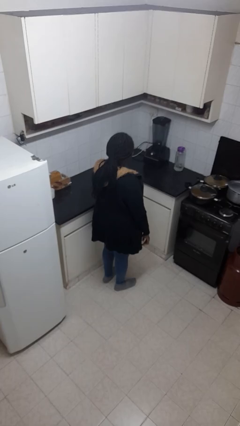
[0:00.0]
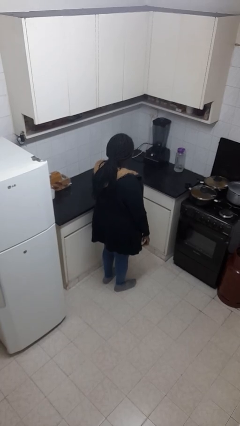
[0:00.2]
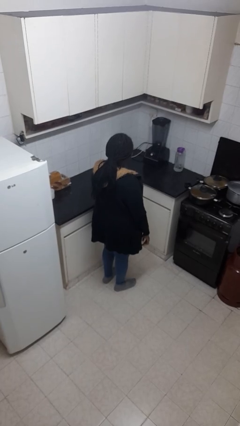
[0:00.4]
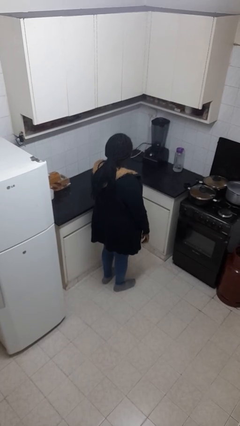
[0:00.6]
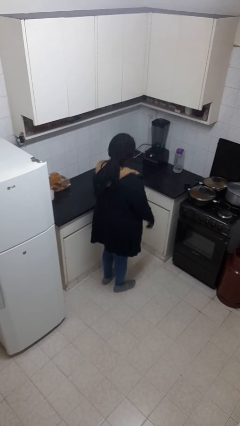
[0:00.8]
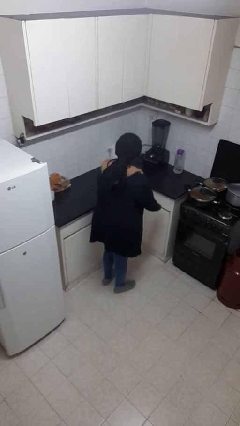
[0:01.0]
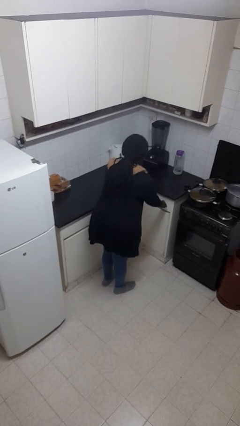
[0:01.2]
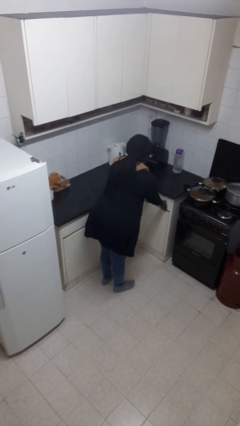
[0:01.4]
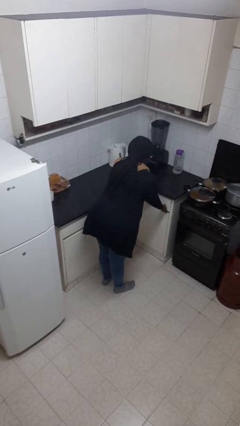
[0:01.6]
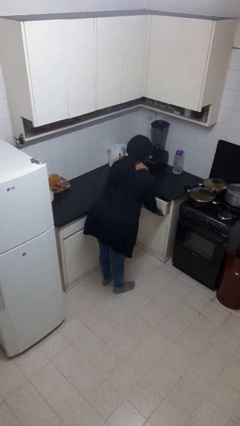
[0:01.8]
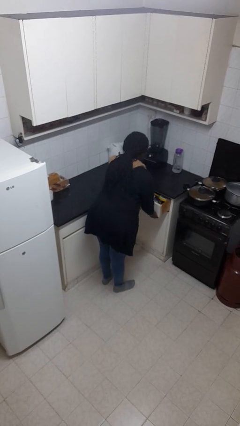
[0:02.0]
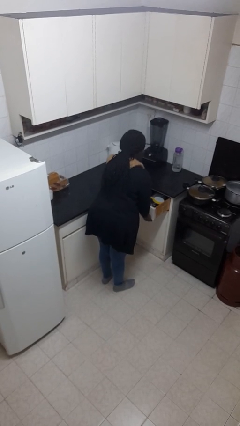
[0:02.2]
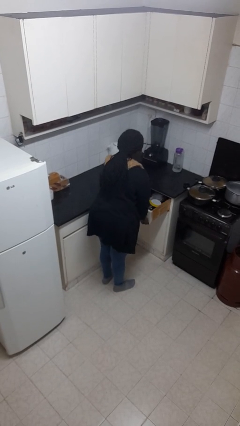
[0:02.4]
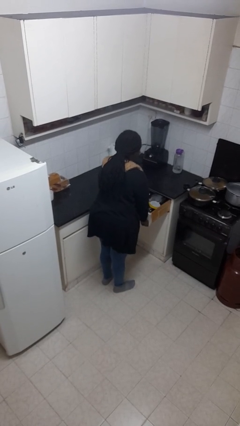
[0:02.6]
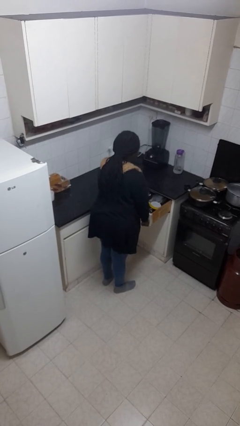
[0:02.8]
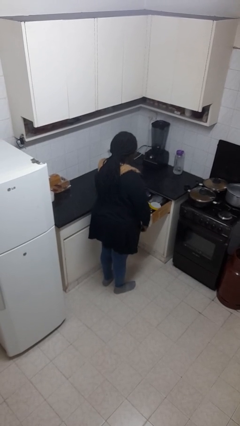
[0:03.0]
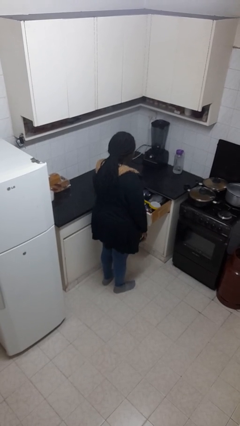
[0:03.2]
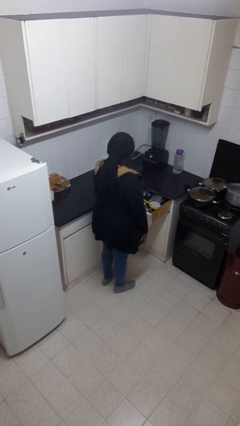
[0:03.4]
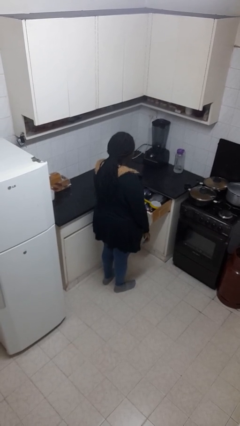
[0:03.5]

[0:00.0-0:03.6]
person opens kitchen drawer

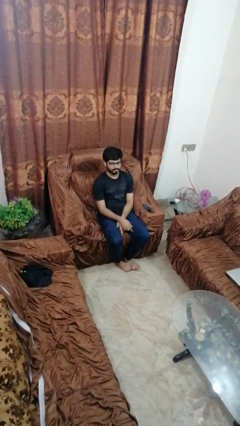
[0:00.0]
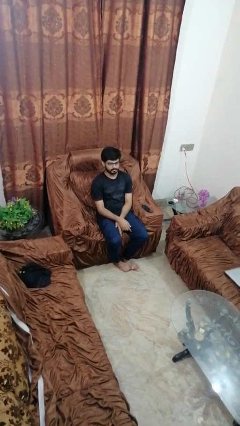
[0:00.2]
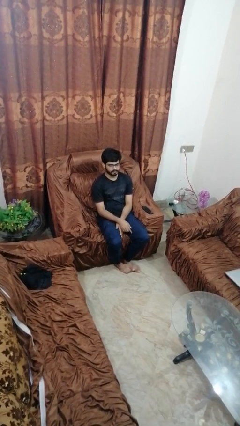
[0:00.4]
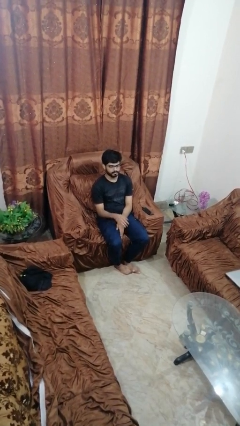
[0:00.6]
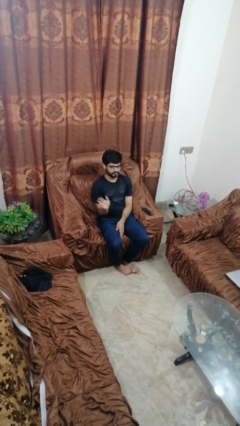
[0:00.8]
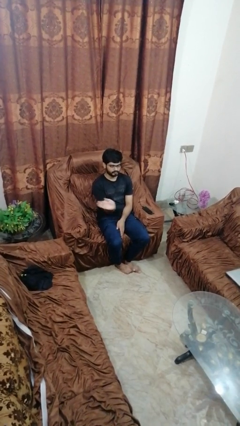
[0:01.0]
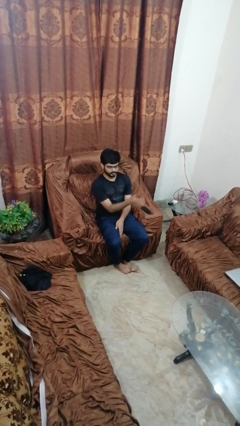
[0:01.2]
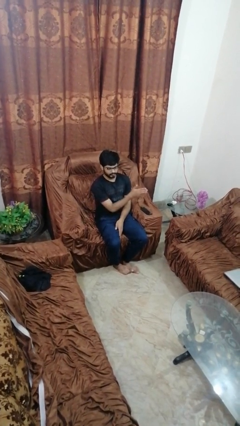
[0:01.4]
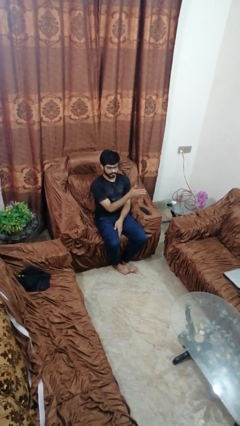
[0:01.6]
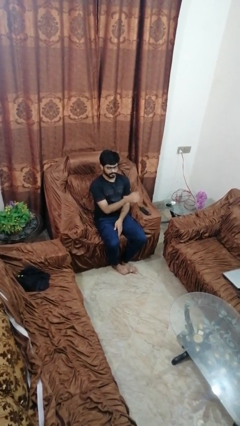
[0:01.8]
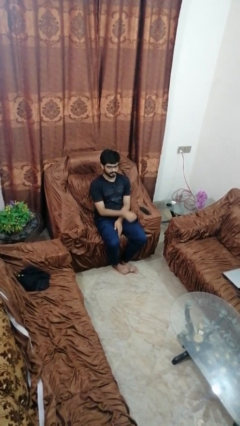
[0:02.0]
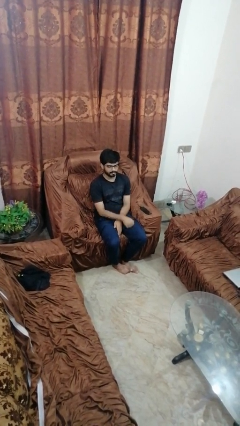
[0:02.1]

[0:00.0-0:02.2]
person gestures swipe left

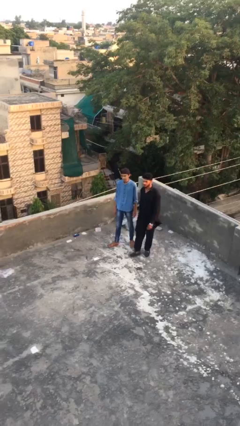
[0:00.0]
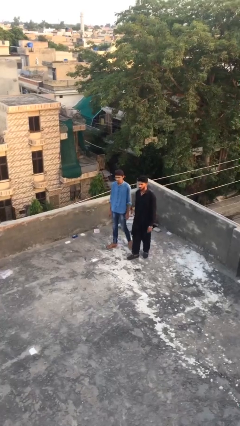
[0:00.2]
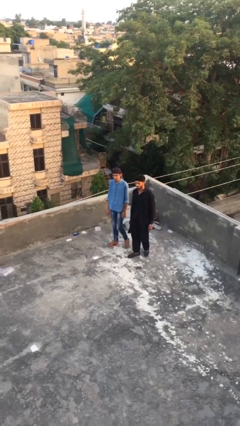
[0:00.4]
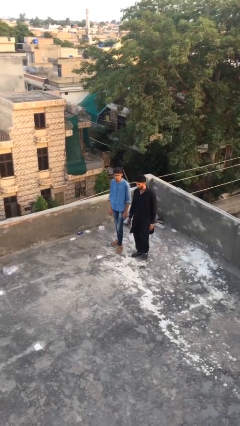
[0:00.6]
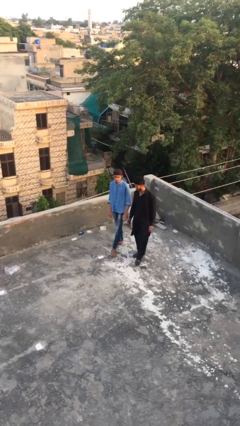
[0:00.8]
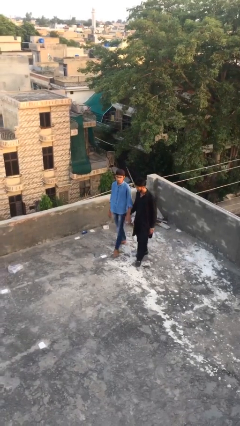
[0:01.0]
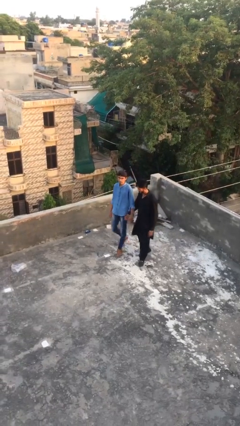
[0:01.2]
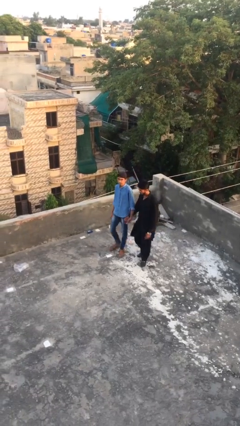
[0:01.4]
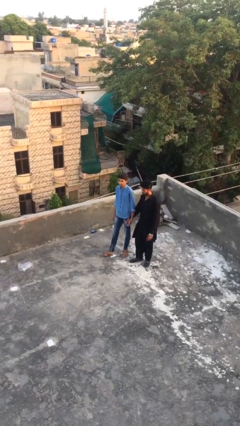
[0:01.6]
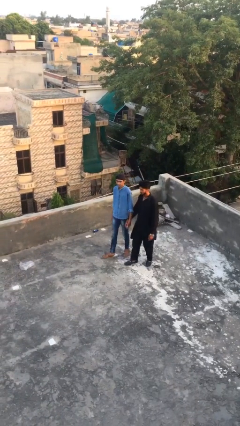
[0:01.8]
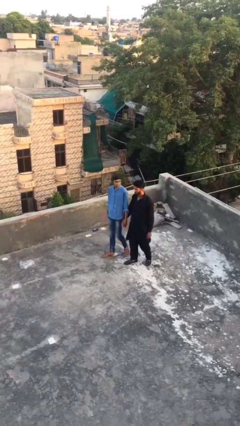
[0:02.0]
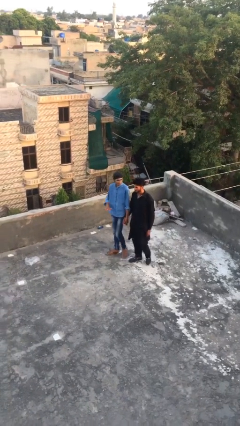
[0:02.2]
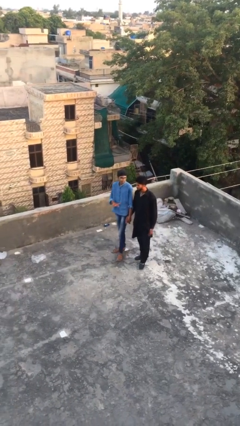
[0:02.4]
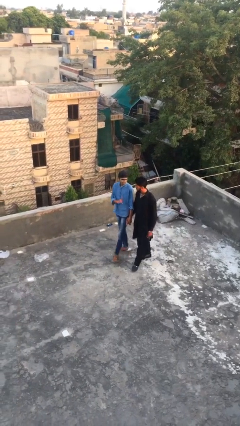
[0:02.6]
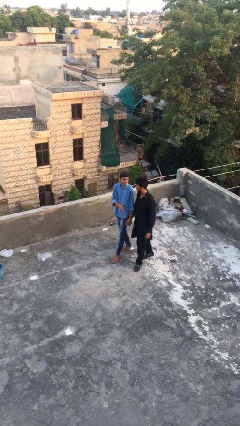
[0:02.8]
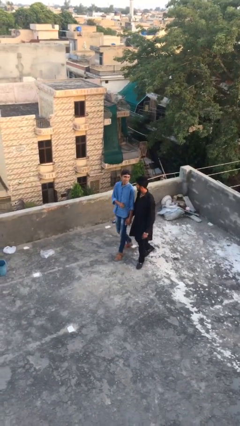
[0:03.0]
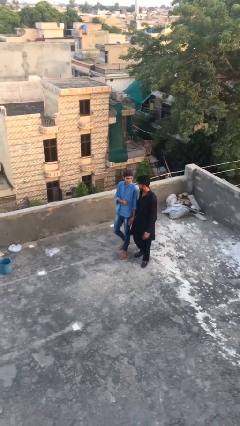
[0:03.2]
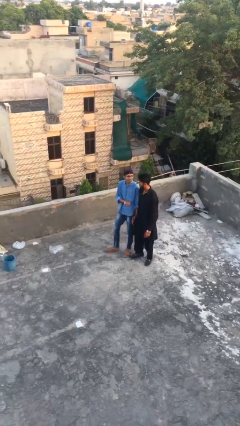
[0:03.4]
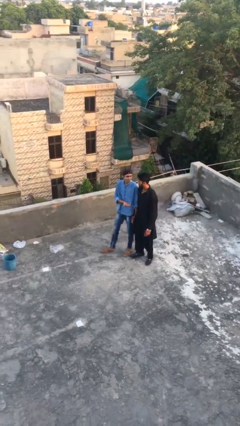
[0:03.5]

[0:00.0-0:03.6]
person holds hand

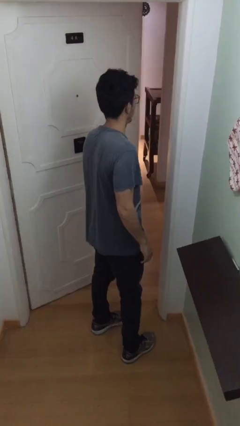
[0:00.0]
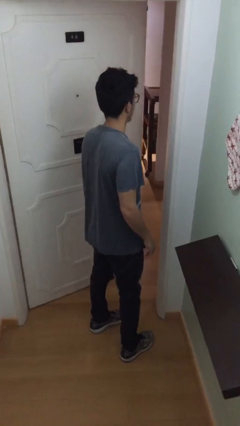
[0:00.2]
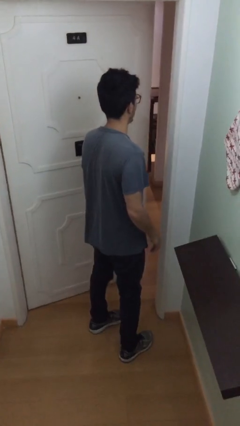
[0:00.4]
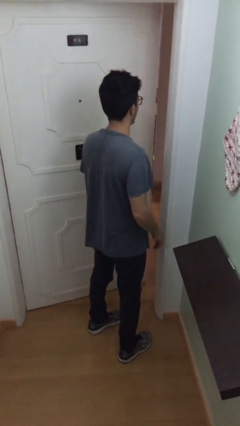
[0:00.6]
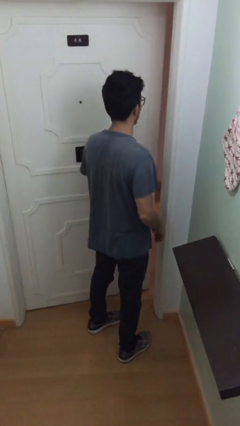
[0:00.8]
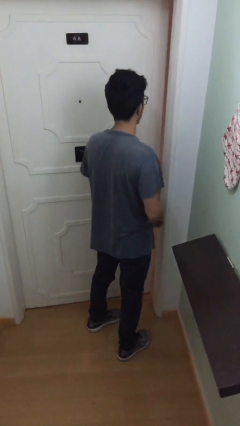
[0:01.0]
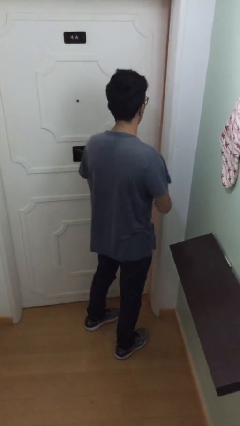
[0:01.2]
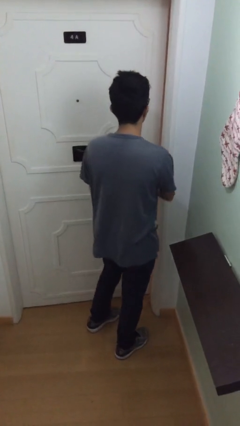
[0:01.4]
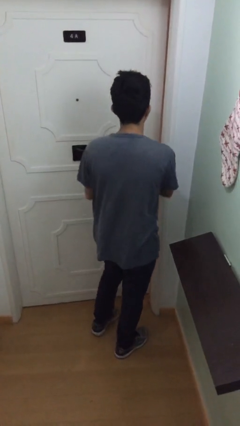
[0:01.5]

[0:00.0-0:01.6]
person closes facility door

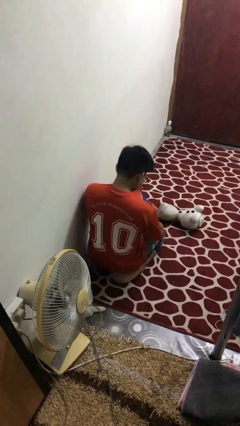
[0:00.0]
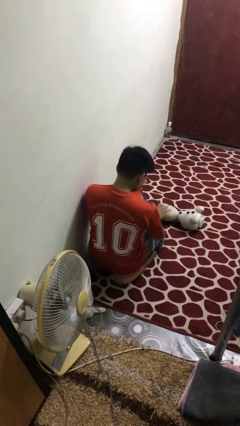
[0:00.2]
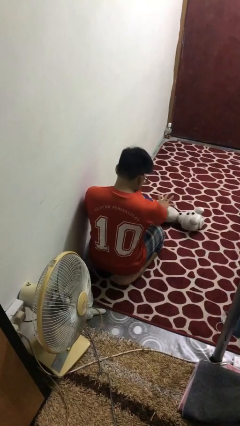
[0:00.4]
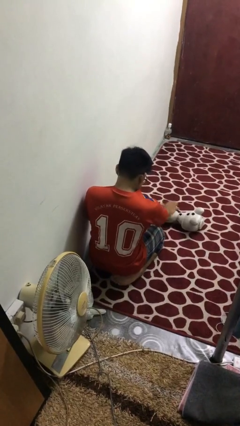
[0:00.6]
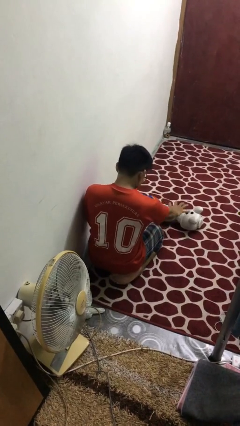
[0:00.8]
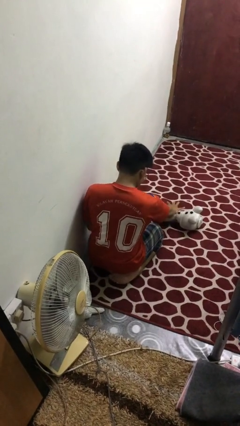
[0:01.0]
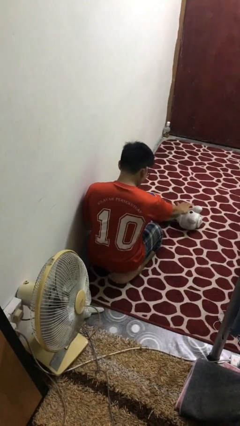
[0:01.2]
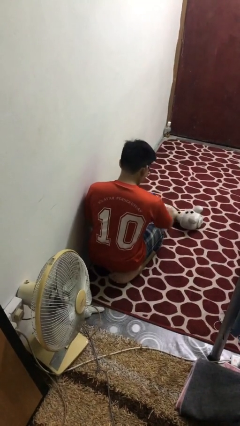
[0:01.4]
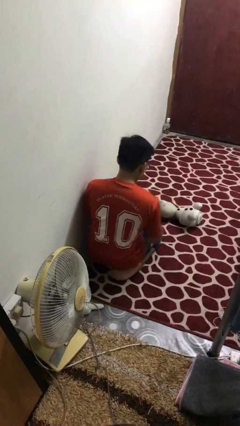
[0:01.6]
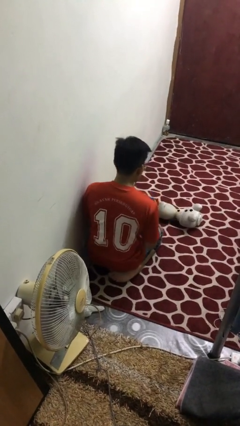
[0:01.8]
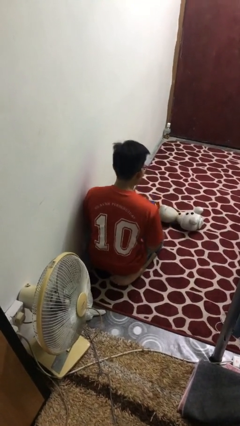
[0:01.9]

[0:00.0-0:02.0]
person waves hand over object

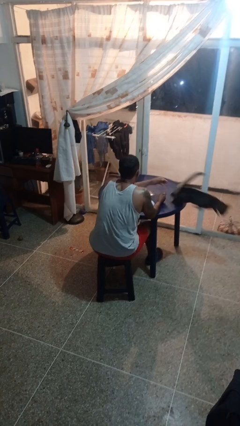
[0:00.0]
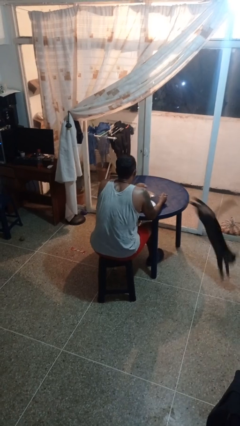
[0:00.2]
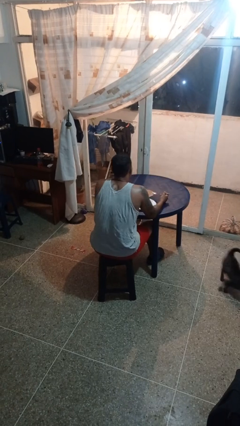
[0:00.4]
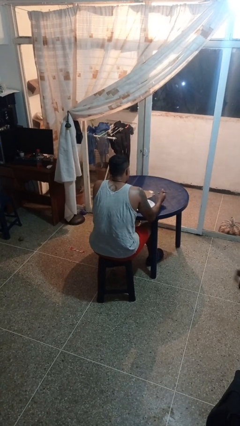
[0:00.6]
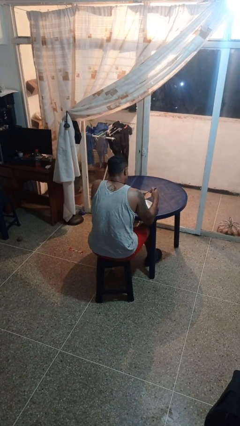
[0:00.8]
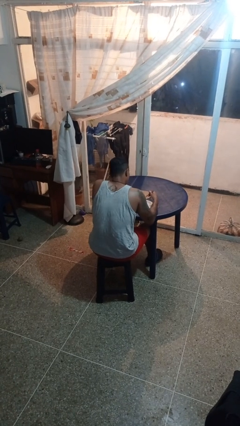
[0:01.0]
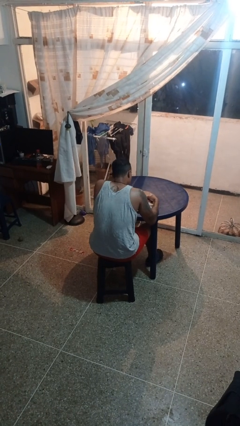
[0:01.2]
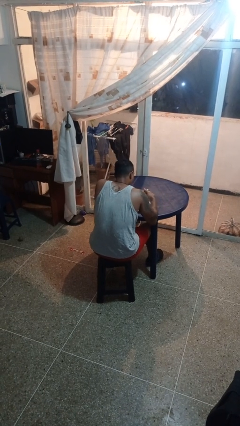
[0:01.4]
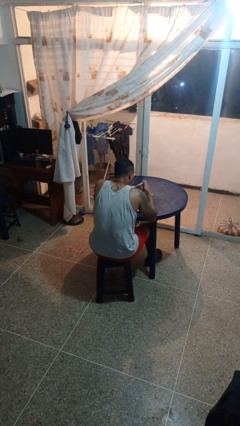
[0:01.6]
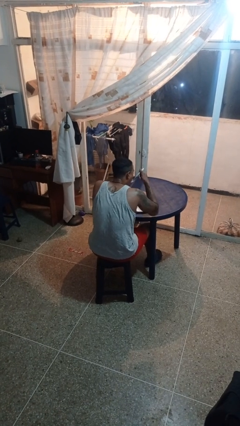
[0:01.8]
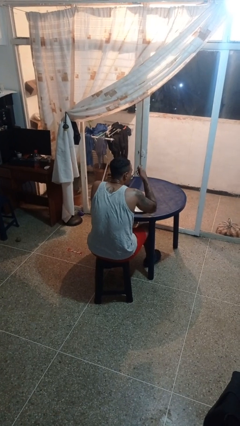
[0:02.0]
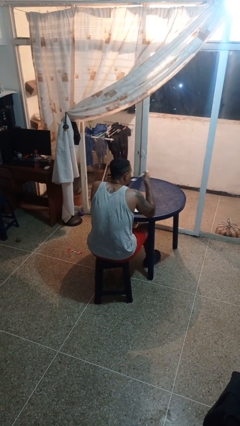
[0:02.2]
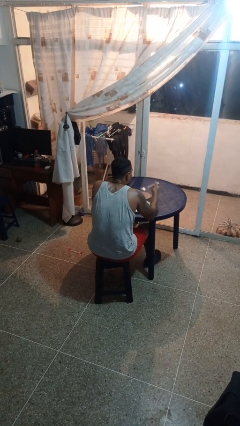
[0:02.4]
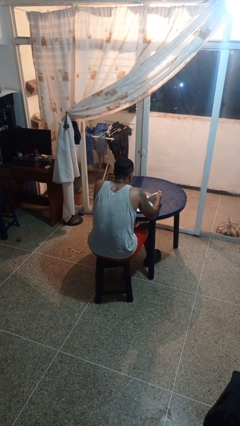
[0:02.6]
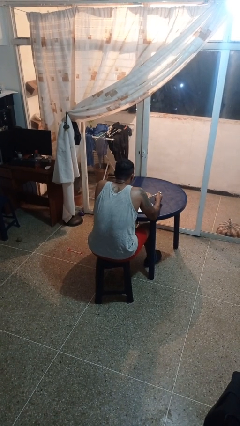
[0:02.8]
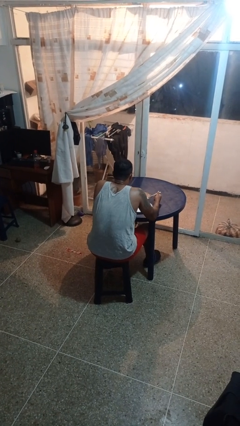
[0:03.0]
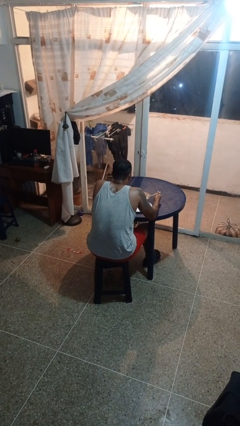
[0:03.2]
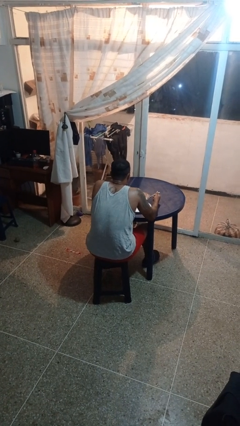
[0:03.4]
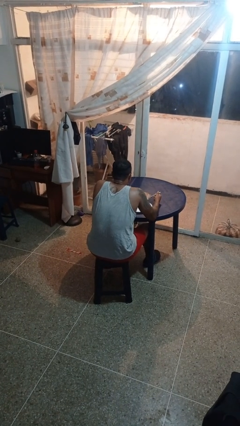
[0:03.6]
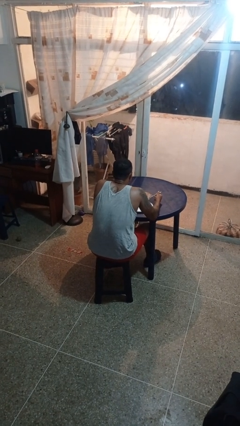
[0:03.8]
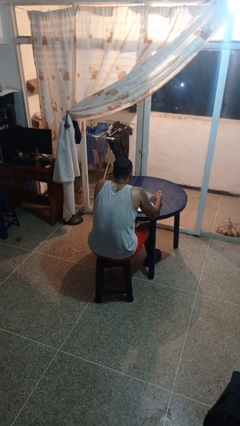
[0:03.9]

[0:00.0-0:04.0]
person eats with utensil

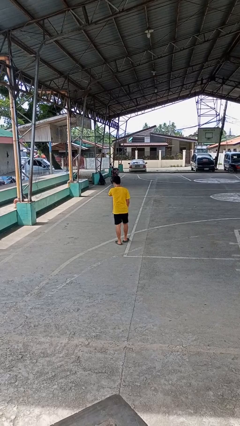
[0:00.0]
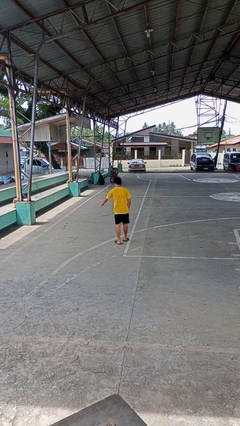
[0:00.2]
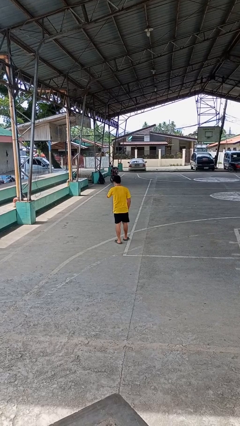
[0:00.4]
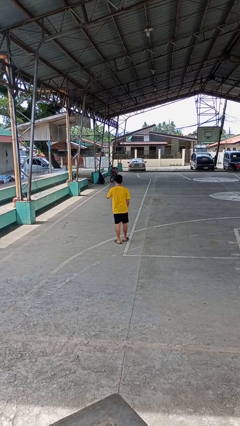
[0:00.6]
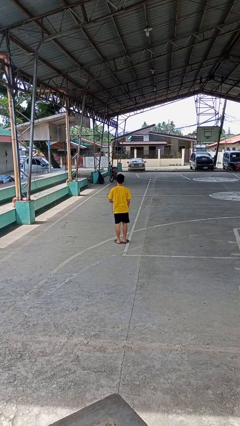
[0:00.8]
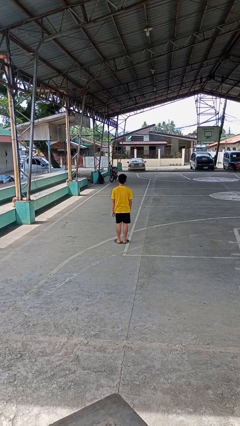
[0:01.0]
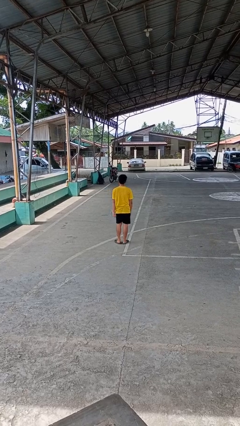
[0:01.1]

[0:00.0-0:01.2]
person karate chop
